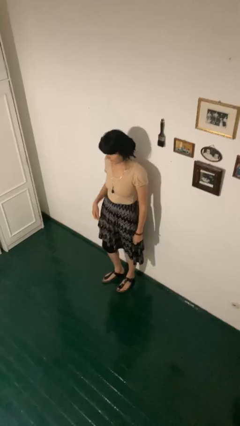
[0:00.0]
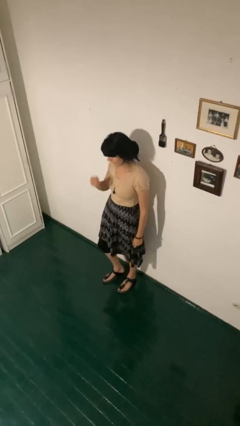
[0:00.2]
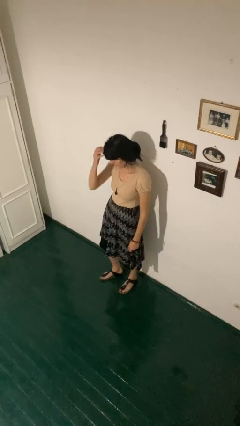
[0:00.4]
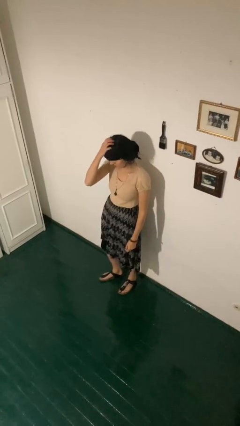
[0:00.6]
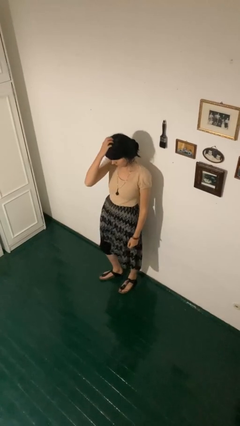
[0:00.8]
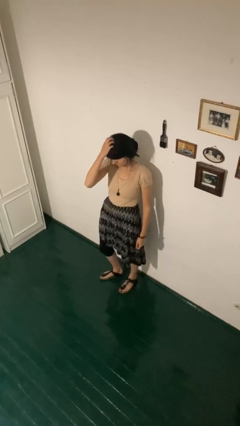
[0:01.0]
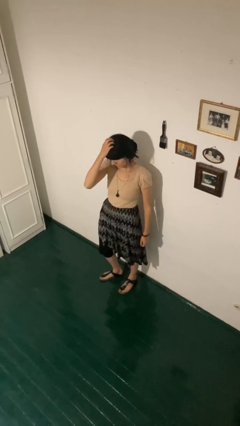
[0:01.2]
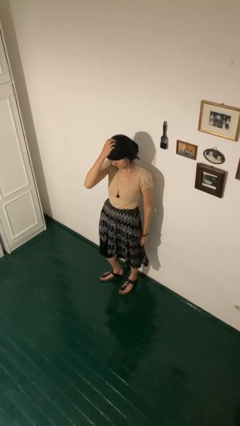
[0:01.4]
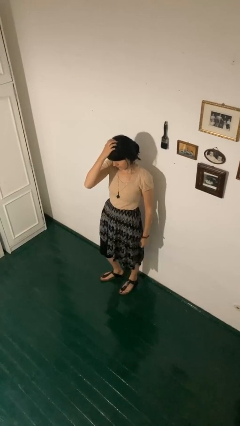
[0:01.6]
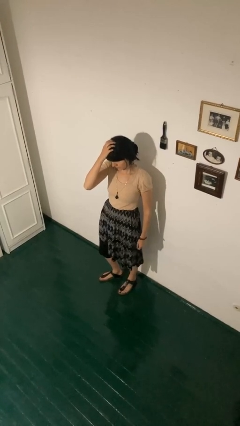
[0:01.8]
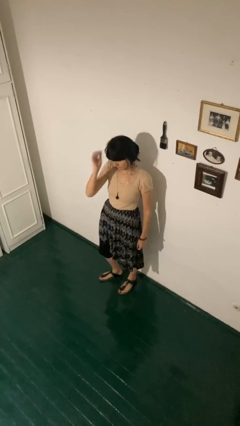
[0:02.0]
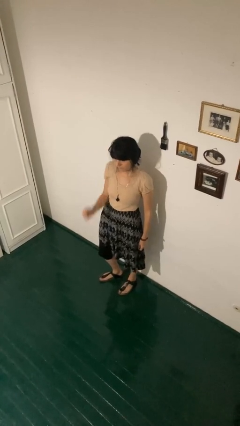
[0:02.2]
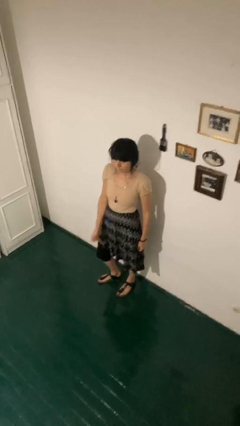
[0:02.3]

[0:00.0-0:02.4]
person scratches face

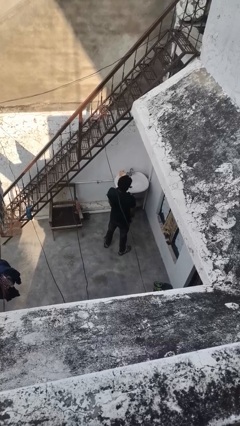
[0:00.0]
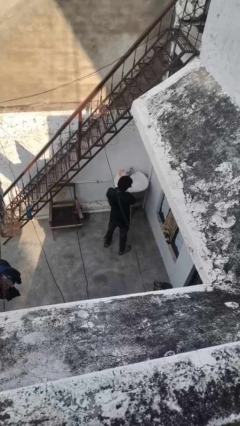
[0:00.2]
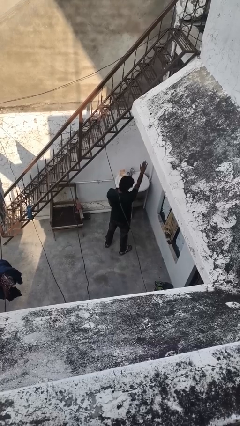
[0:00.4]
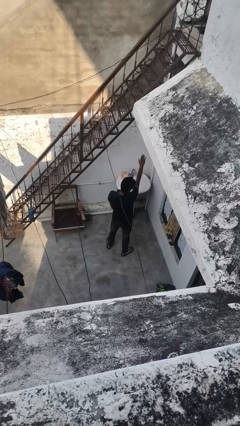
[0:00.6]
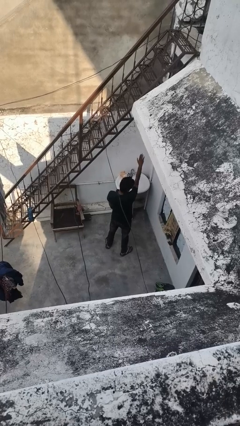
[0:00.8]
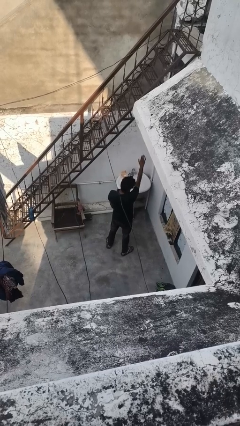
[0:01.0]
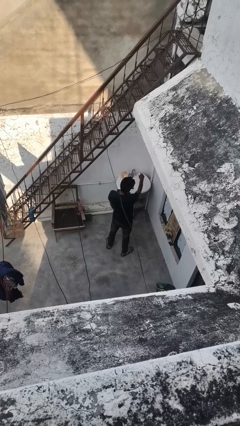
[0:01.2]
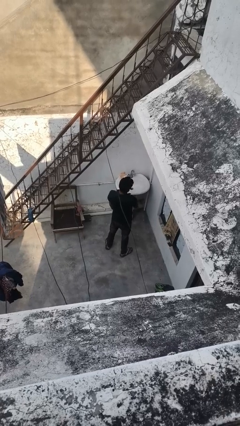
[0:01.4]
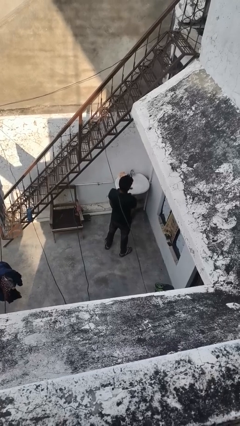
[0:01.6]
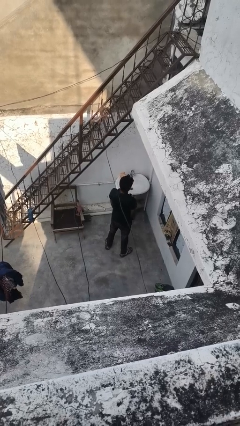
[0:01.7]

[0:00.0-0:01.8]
person gestures stop

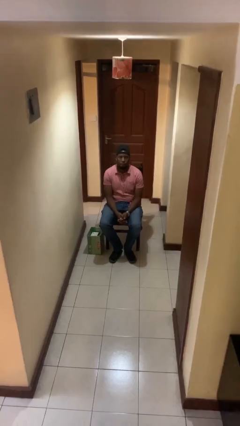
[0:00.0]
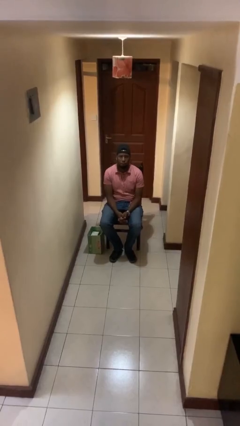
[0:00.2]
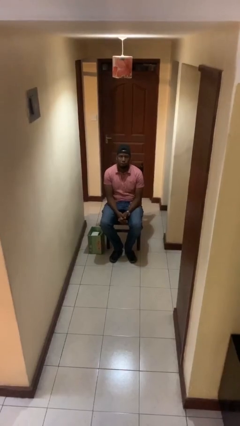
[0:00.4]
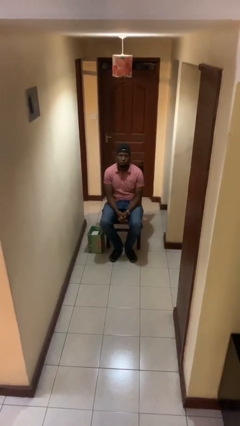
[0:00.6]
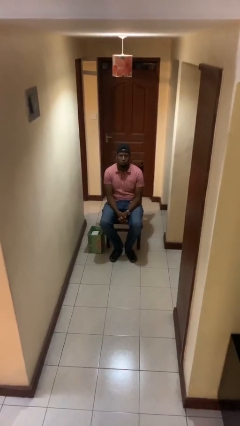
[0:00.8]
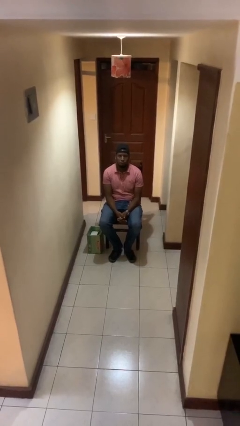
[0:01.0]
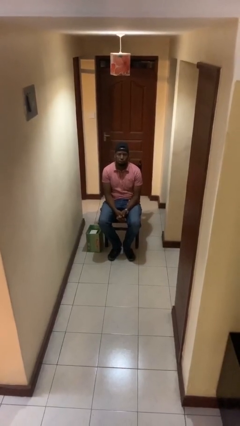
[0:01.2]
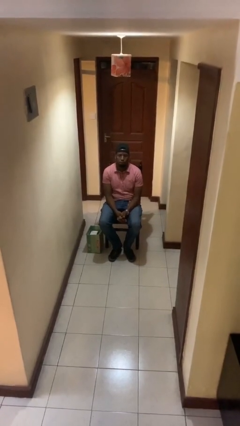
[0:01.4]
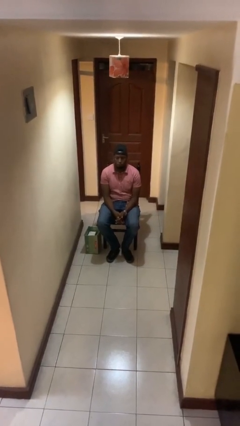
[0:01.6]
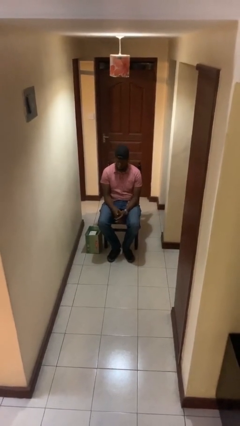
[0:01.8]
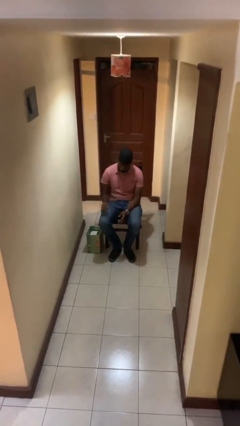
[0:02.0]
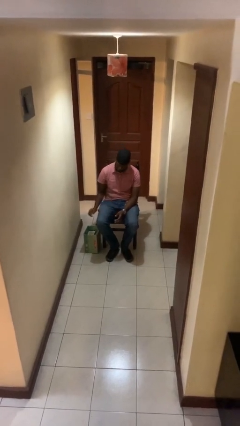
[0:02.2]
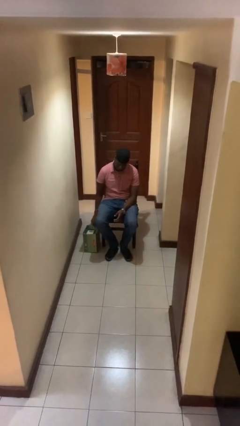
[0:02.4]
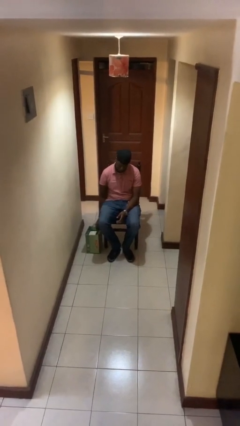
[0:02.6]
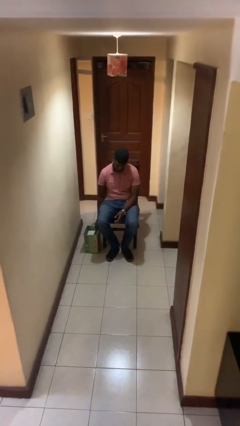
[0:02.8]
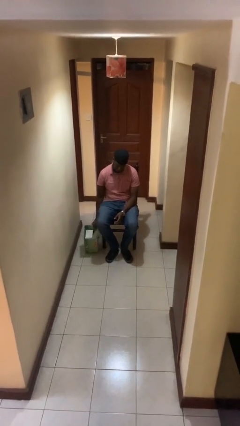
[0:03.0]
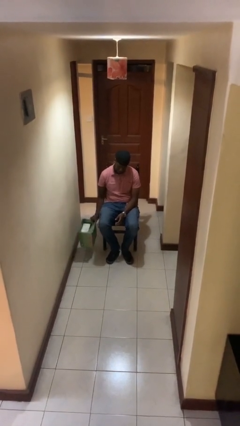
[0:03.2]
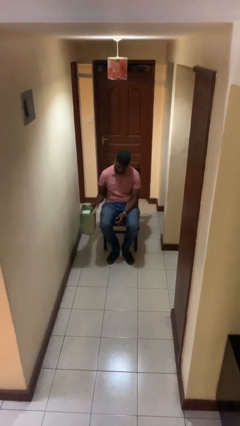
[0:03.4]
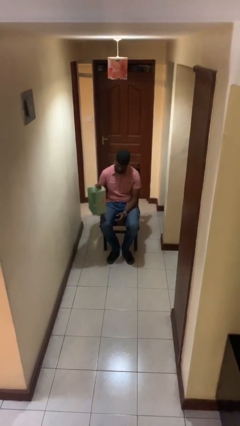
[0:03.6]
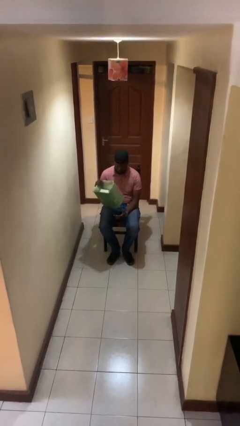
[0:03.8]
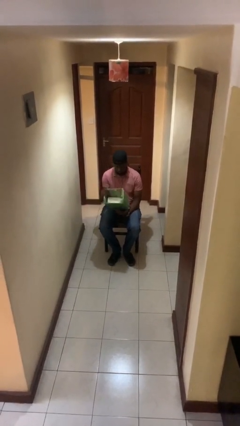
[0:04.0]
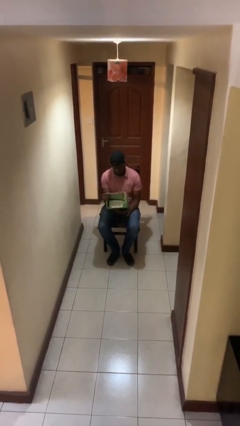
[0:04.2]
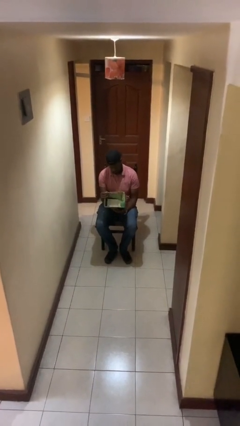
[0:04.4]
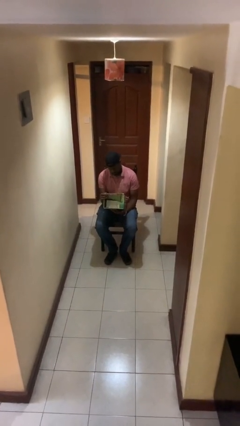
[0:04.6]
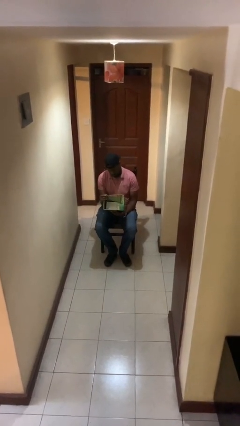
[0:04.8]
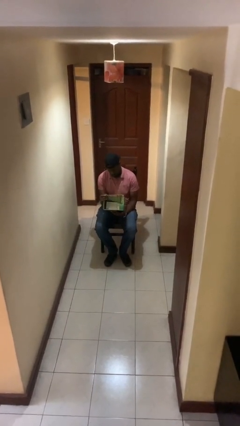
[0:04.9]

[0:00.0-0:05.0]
person picks up object from floor

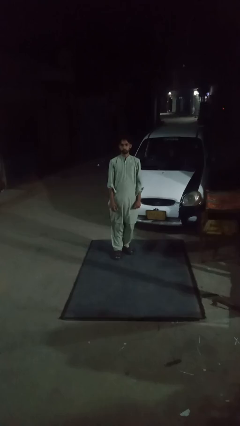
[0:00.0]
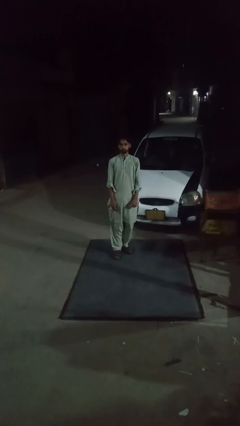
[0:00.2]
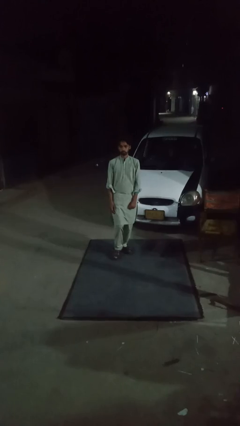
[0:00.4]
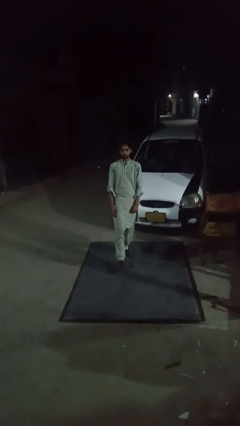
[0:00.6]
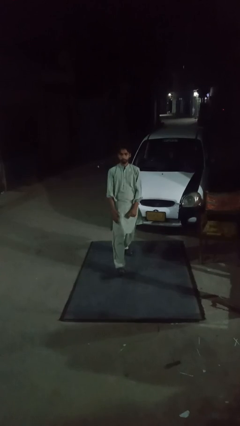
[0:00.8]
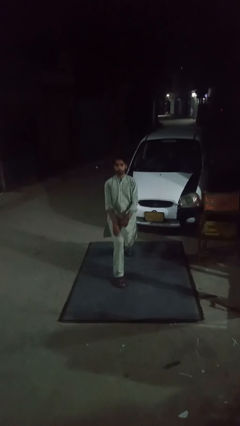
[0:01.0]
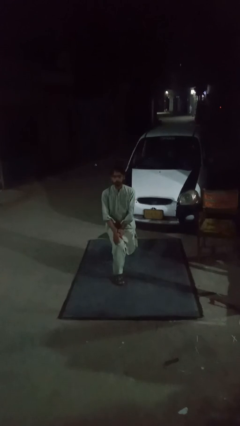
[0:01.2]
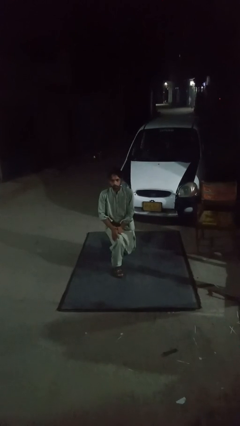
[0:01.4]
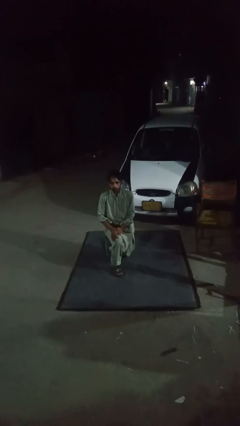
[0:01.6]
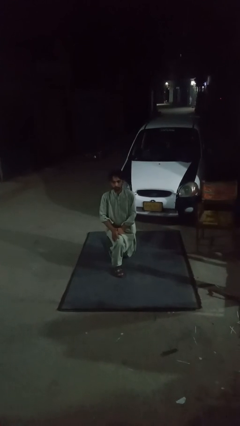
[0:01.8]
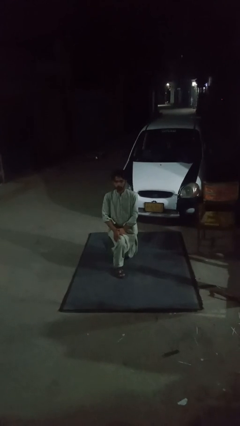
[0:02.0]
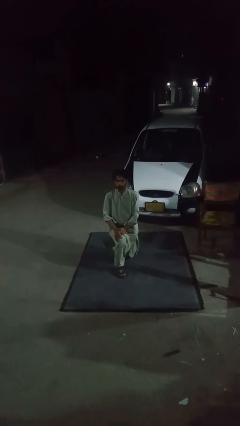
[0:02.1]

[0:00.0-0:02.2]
person exercises with lunges

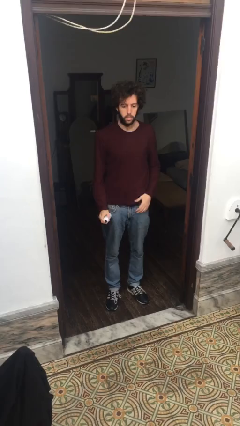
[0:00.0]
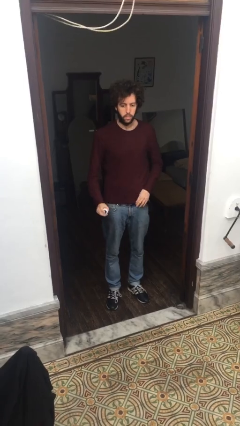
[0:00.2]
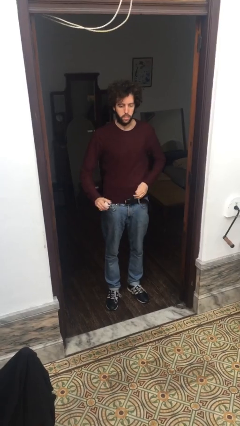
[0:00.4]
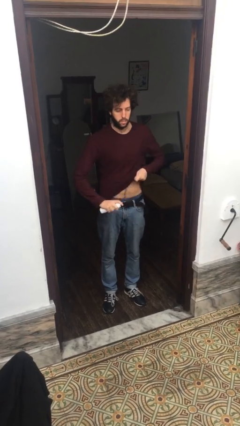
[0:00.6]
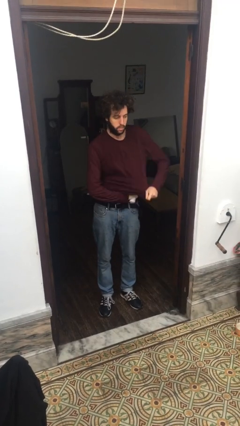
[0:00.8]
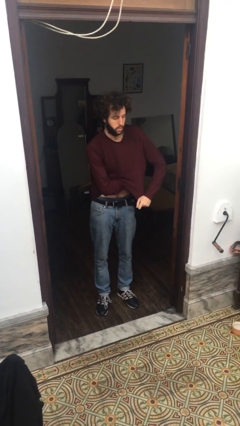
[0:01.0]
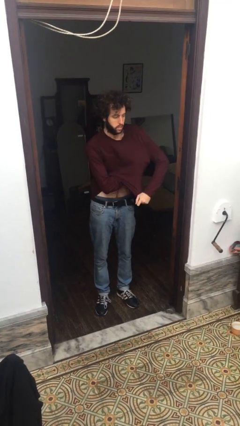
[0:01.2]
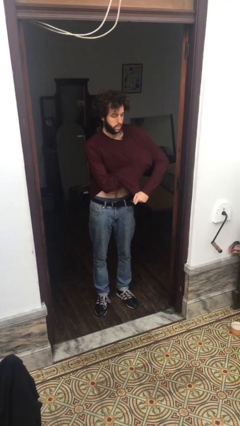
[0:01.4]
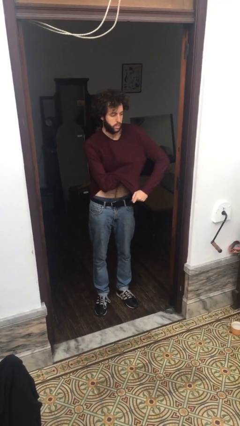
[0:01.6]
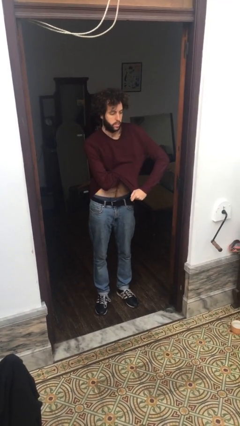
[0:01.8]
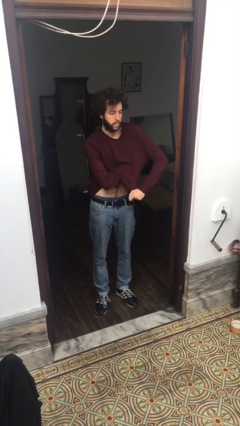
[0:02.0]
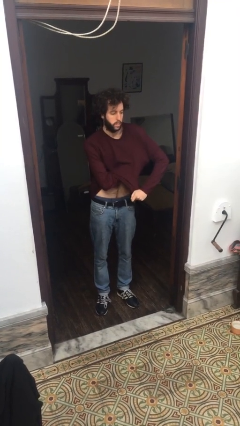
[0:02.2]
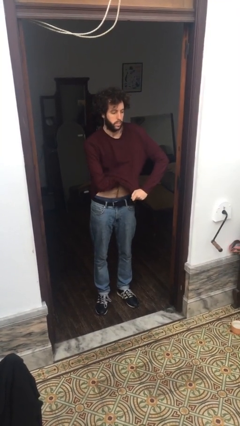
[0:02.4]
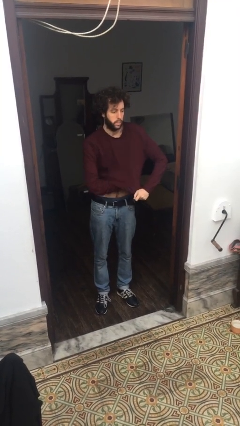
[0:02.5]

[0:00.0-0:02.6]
person applies deodorant

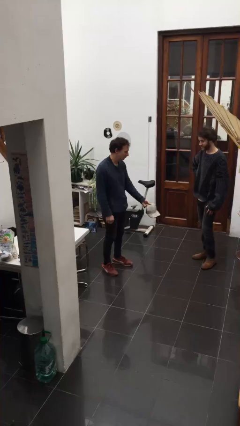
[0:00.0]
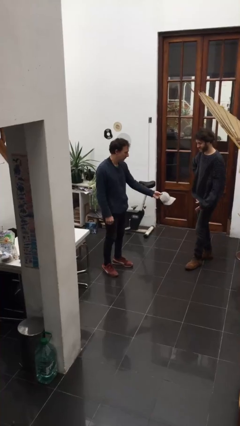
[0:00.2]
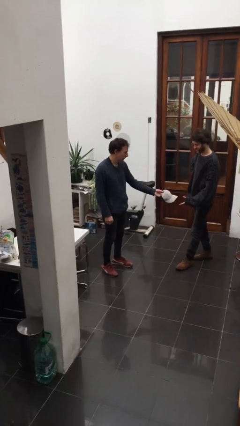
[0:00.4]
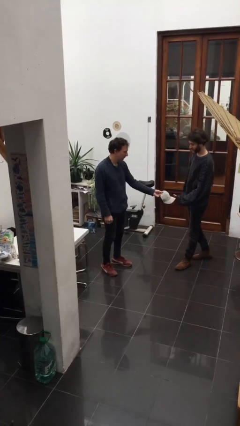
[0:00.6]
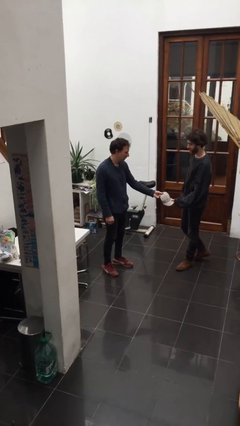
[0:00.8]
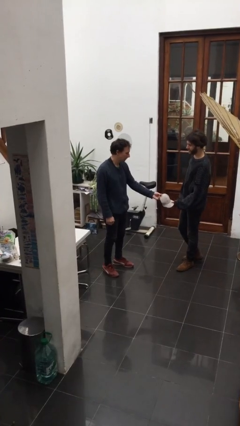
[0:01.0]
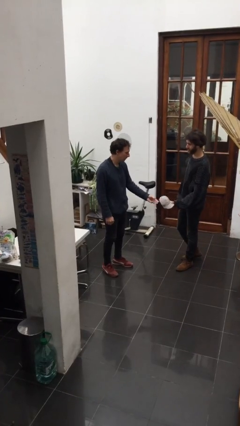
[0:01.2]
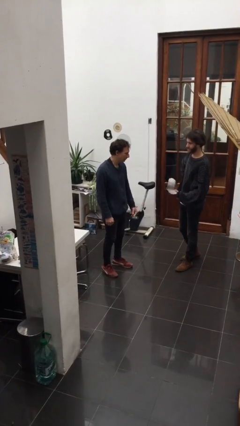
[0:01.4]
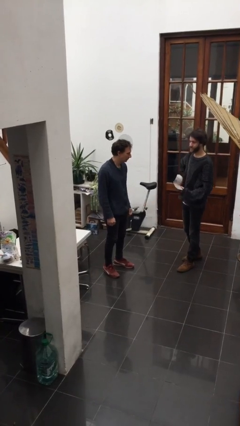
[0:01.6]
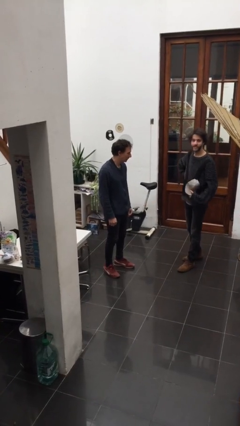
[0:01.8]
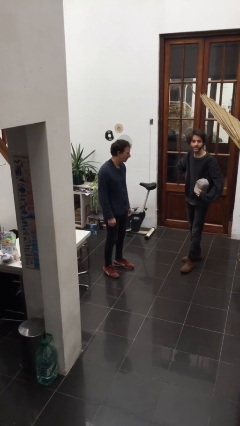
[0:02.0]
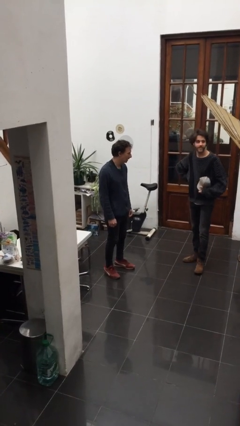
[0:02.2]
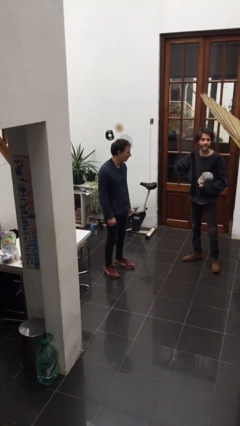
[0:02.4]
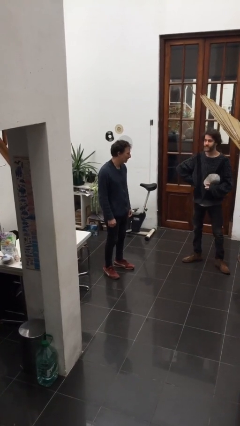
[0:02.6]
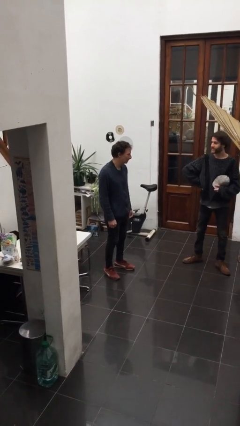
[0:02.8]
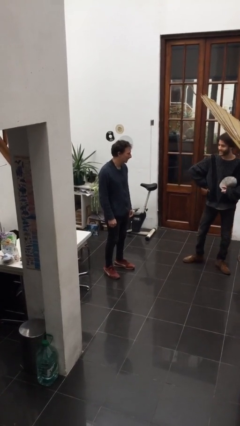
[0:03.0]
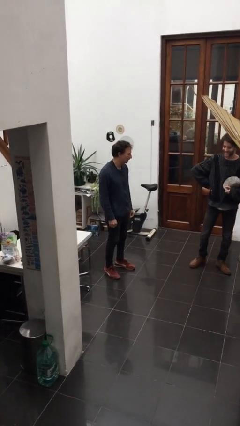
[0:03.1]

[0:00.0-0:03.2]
person transfers object to person
